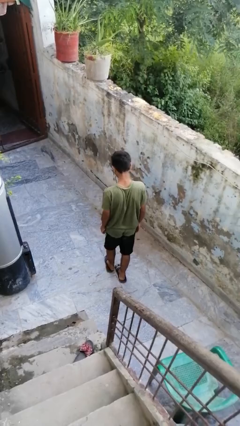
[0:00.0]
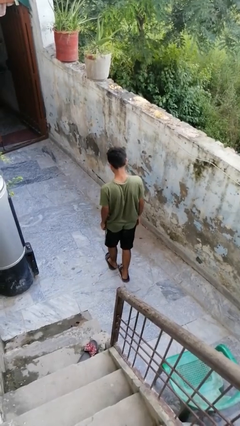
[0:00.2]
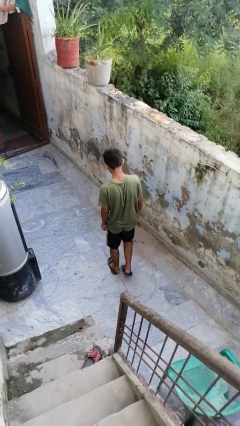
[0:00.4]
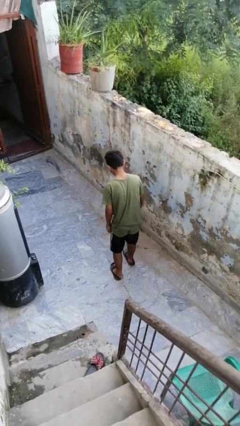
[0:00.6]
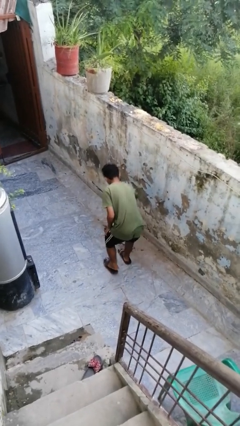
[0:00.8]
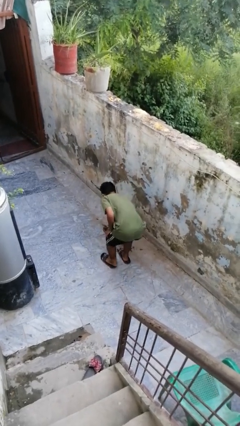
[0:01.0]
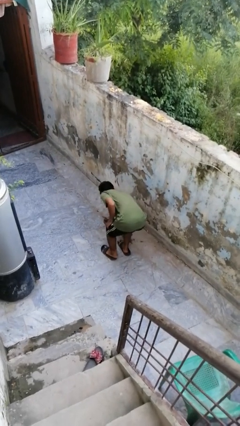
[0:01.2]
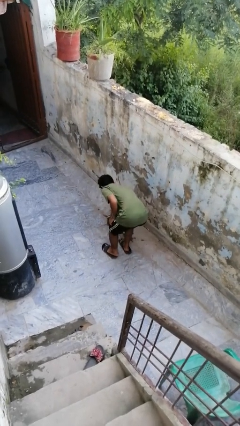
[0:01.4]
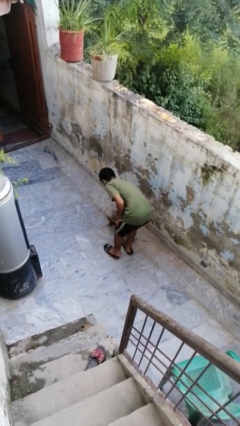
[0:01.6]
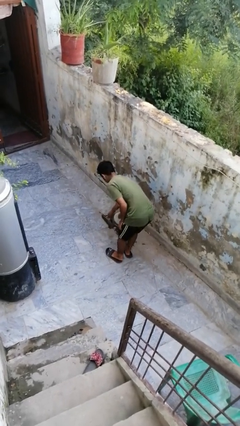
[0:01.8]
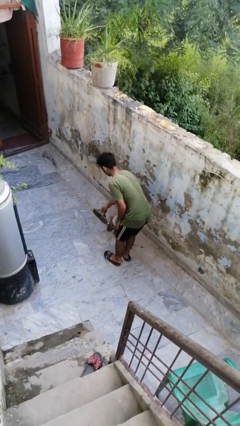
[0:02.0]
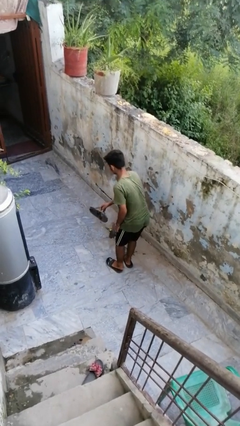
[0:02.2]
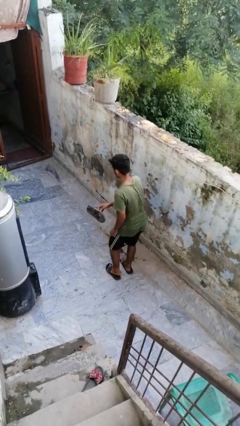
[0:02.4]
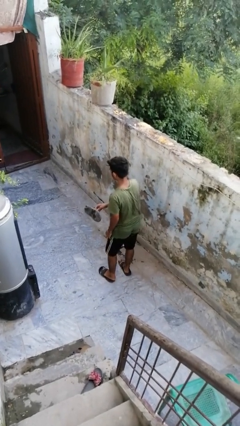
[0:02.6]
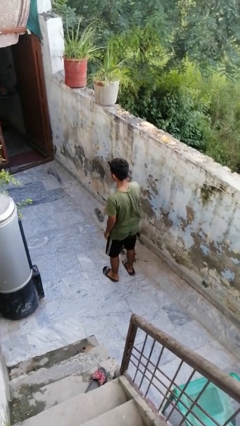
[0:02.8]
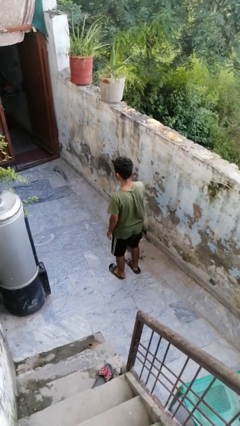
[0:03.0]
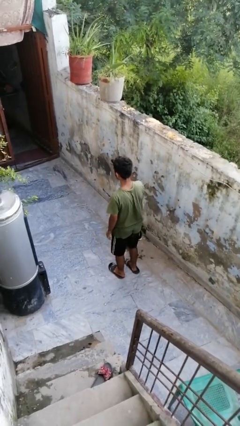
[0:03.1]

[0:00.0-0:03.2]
person picks up object from floor

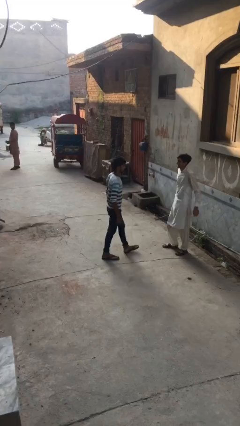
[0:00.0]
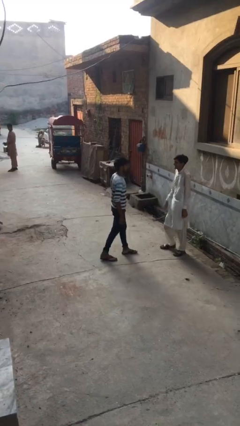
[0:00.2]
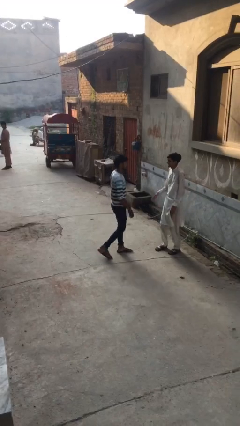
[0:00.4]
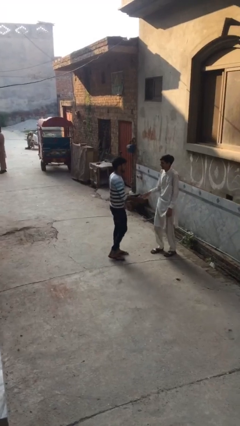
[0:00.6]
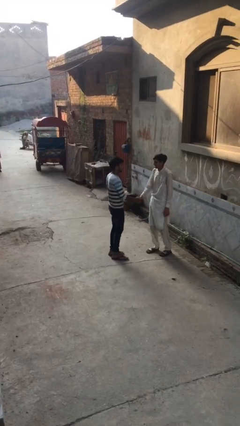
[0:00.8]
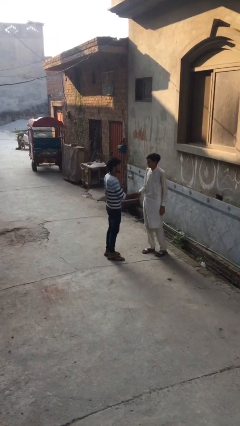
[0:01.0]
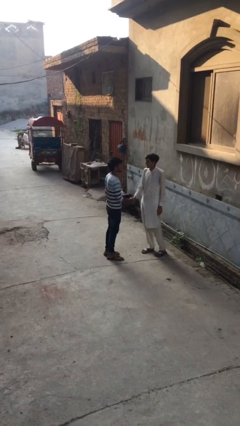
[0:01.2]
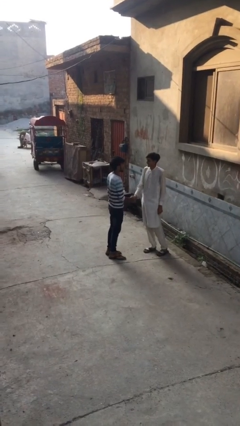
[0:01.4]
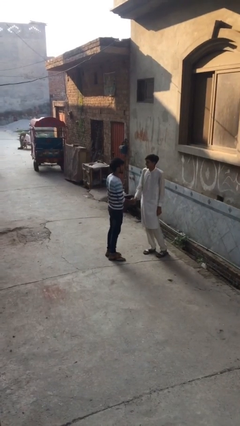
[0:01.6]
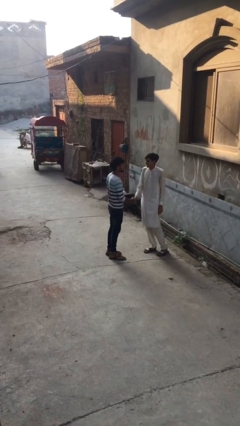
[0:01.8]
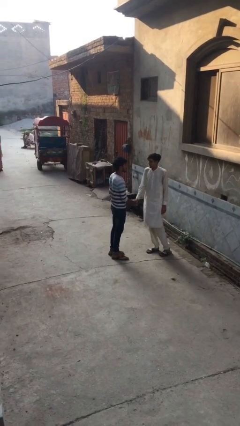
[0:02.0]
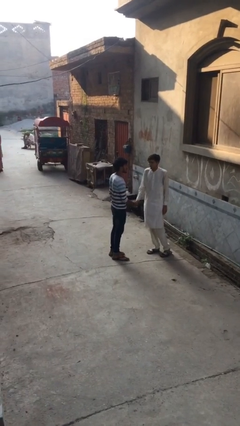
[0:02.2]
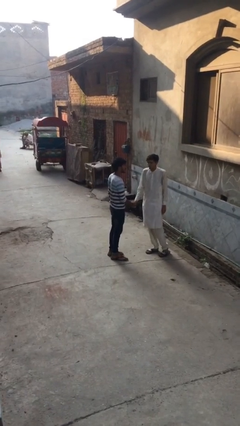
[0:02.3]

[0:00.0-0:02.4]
person shakes hand

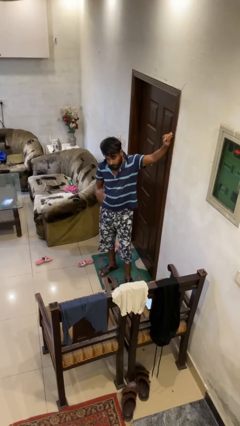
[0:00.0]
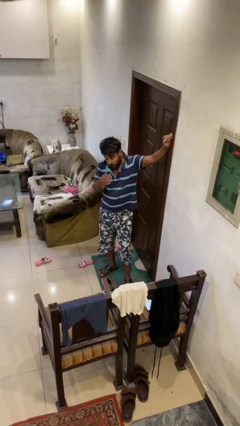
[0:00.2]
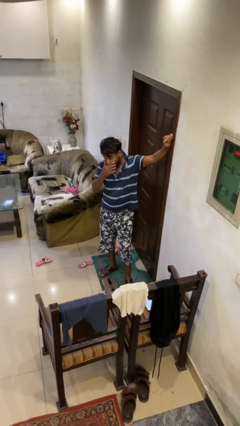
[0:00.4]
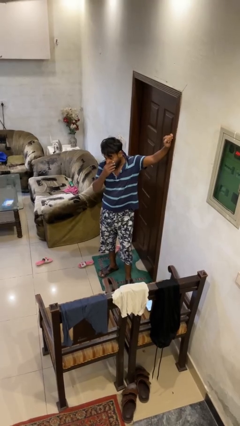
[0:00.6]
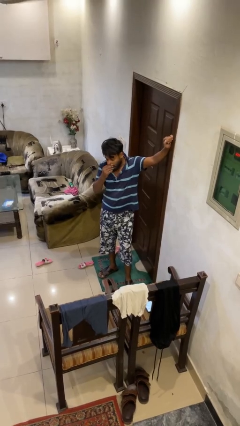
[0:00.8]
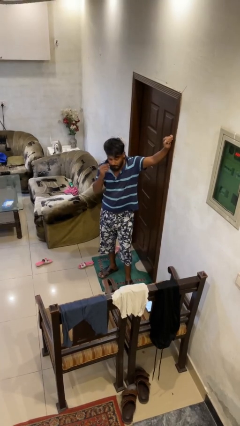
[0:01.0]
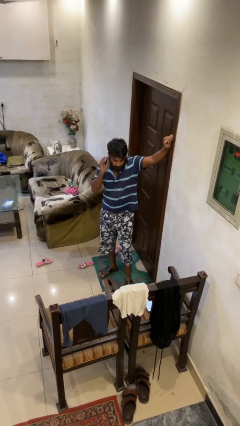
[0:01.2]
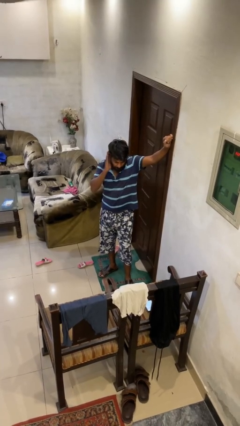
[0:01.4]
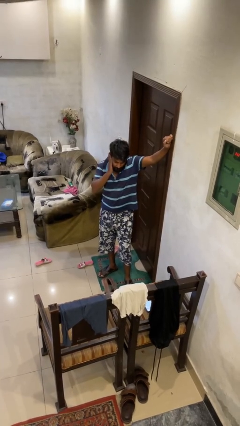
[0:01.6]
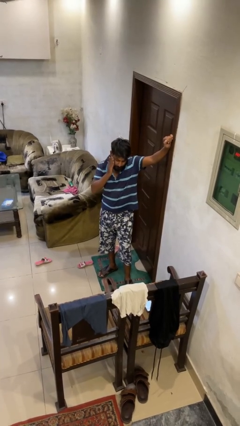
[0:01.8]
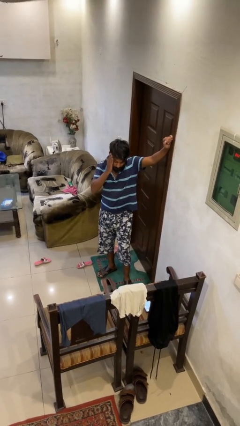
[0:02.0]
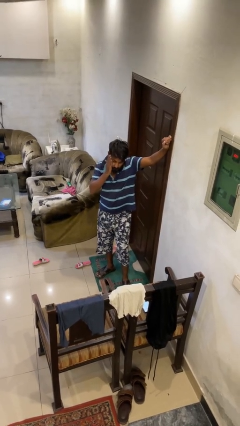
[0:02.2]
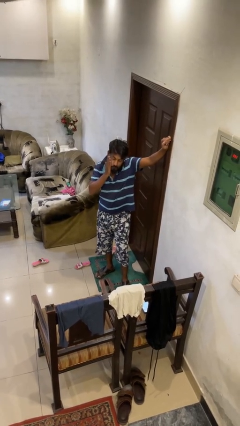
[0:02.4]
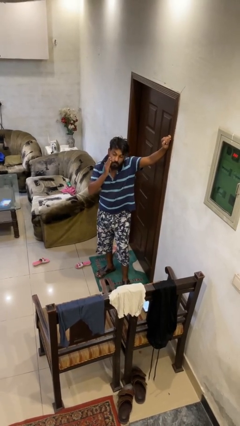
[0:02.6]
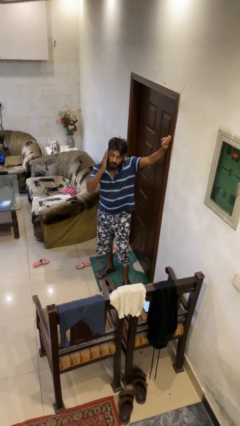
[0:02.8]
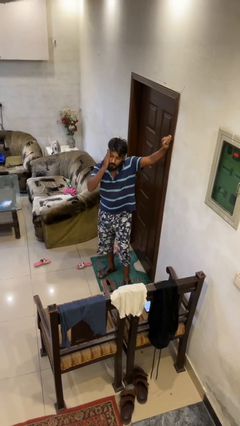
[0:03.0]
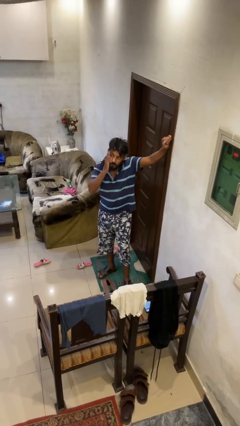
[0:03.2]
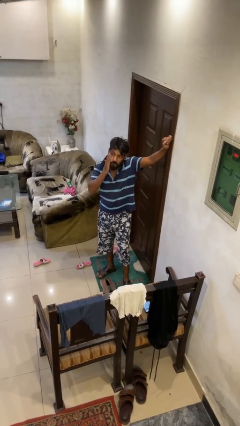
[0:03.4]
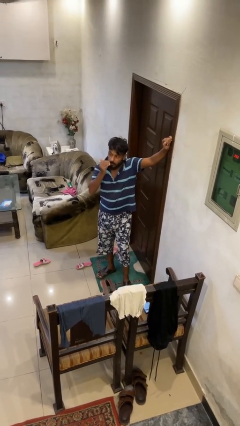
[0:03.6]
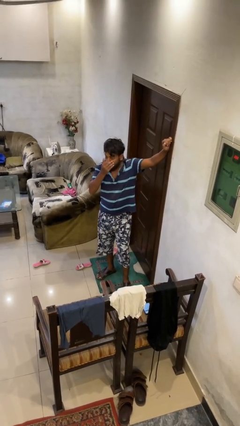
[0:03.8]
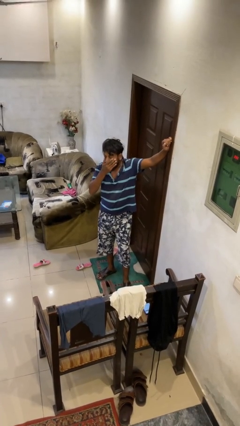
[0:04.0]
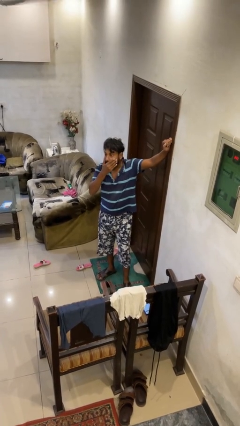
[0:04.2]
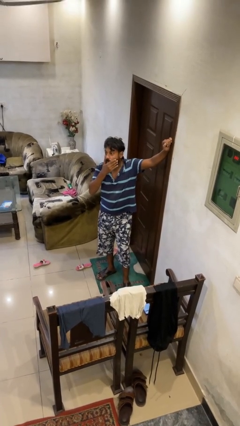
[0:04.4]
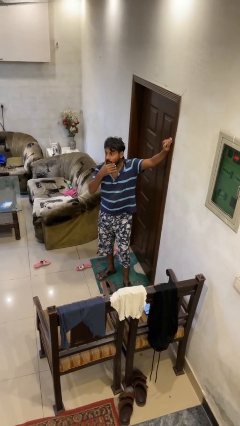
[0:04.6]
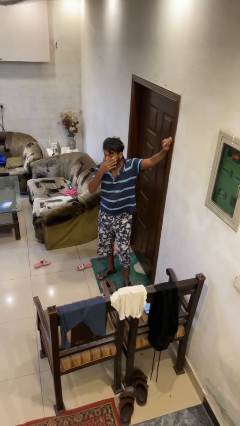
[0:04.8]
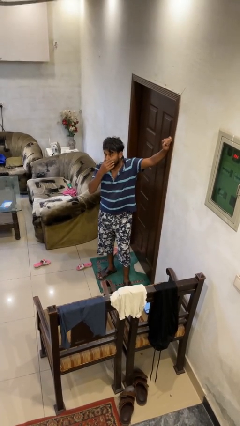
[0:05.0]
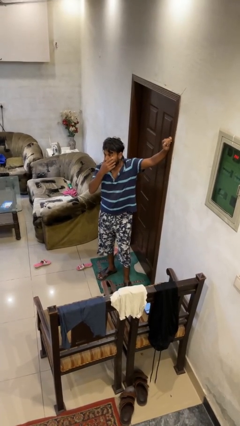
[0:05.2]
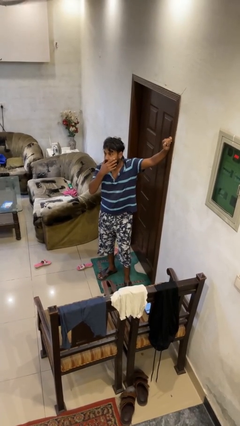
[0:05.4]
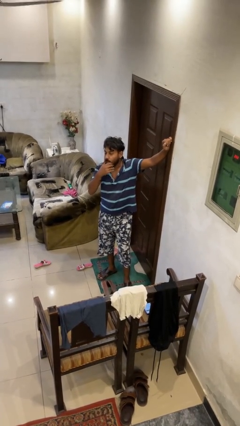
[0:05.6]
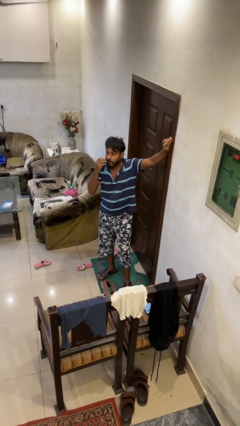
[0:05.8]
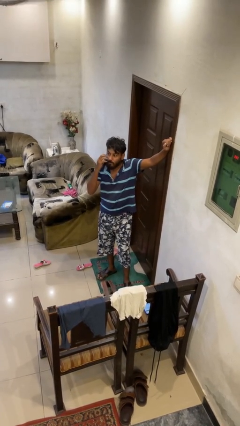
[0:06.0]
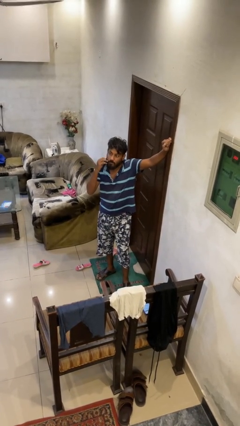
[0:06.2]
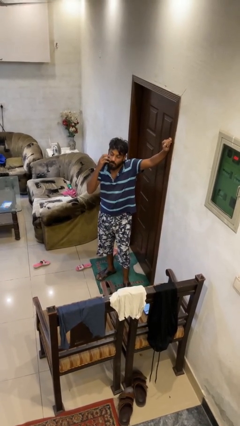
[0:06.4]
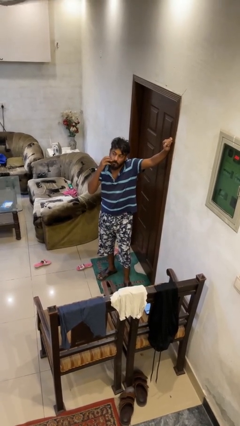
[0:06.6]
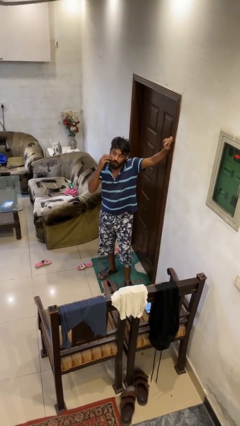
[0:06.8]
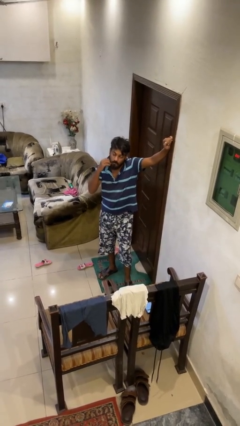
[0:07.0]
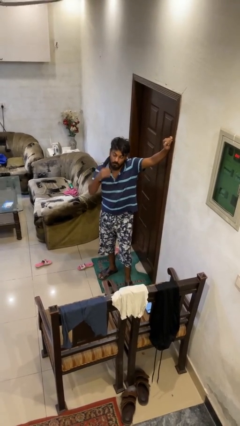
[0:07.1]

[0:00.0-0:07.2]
person scratches face

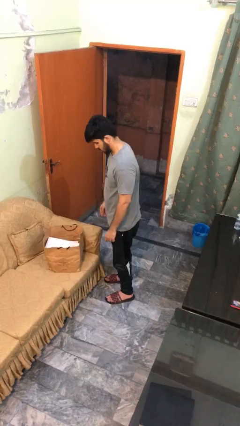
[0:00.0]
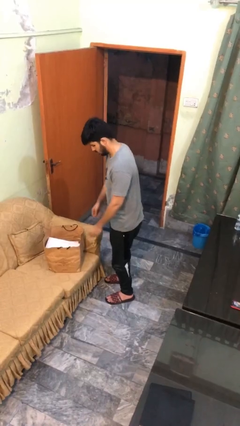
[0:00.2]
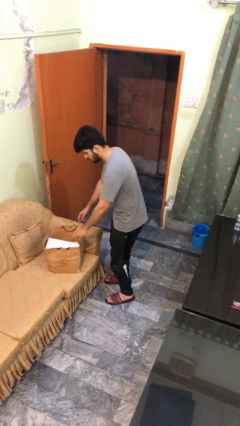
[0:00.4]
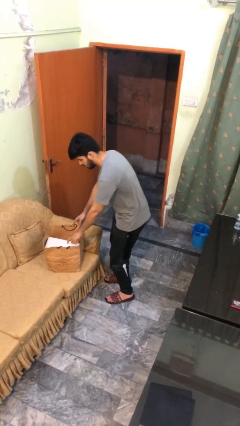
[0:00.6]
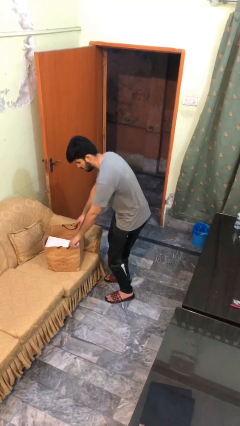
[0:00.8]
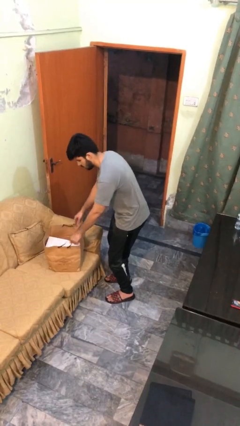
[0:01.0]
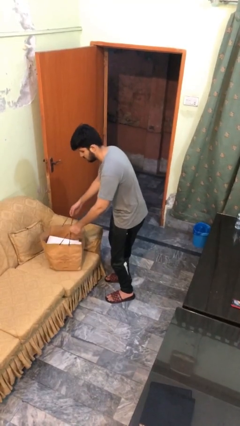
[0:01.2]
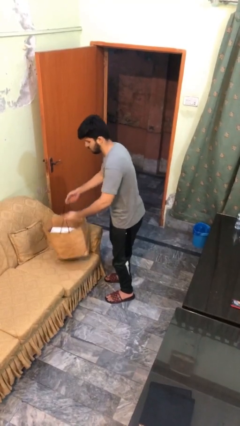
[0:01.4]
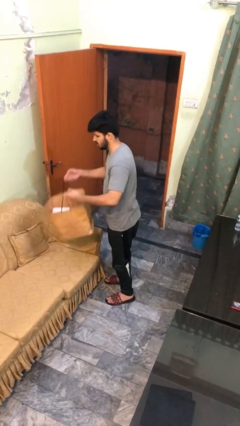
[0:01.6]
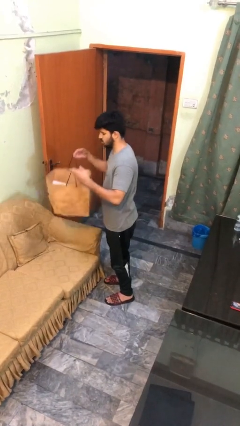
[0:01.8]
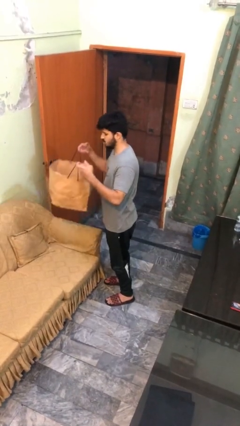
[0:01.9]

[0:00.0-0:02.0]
person picks up object from couch

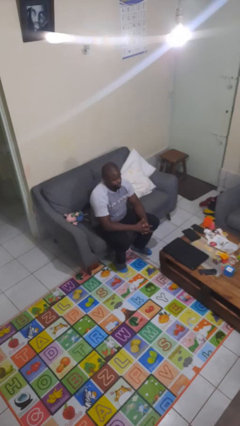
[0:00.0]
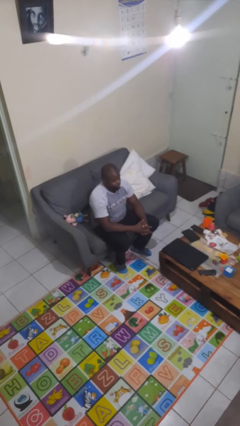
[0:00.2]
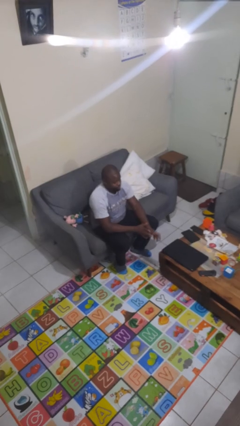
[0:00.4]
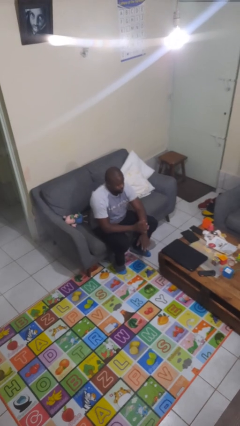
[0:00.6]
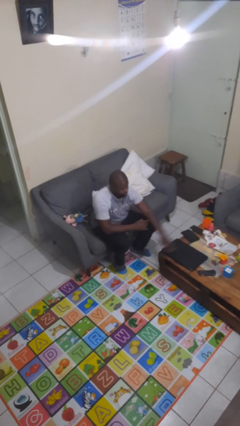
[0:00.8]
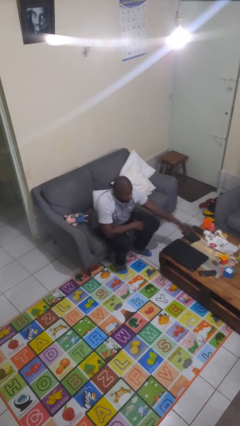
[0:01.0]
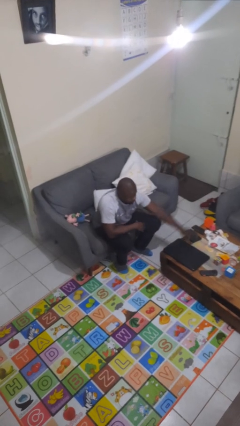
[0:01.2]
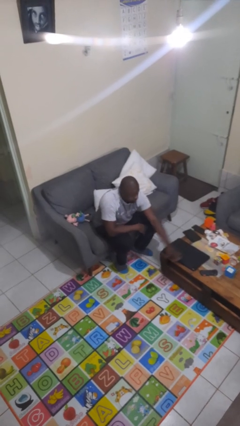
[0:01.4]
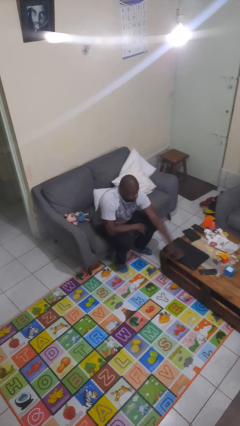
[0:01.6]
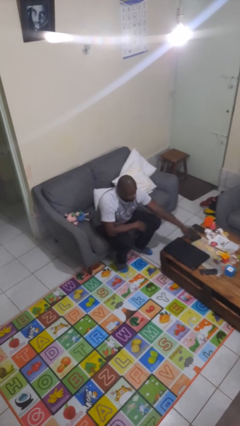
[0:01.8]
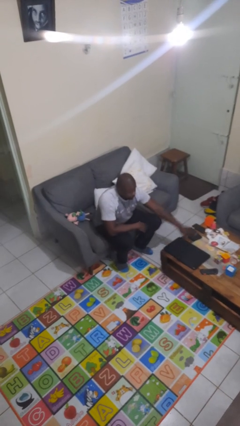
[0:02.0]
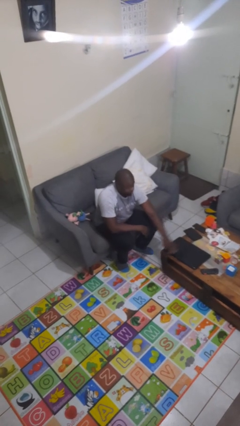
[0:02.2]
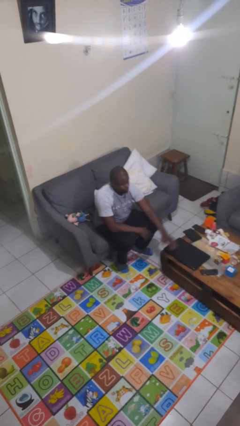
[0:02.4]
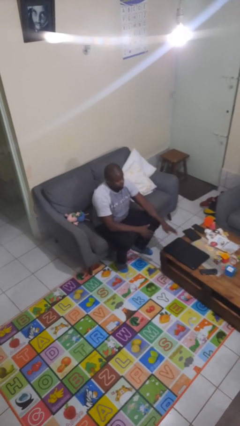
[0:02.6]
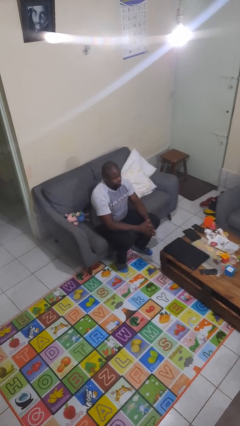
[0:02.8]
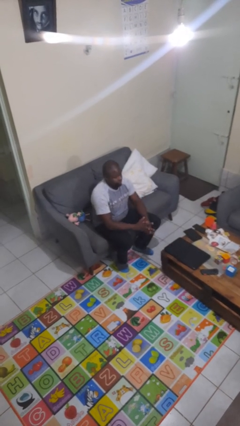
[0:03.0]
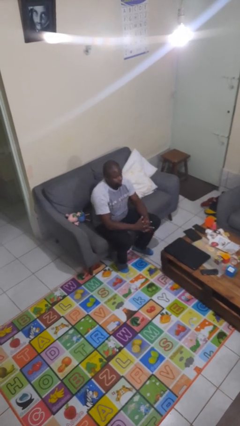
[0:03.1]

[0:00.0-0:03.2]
person waves hand over object
